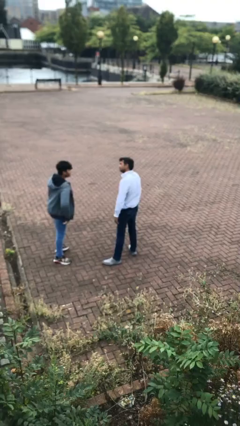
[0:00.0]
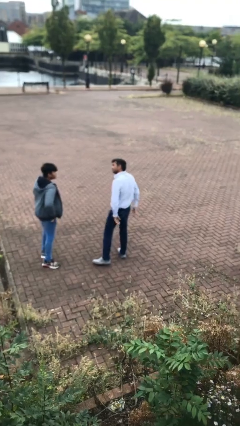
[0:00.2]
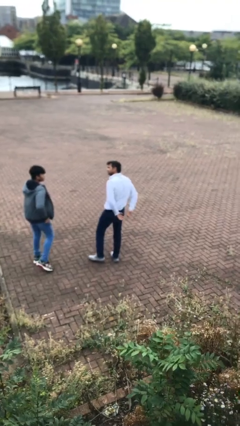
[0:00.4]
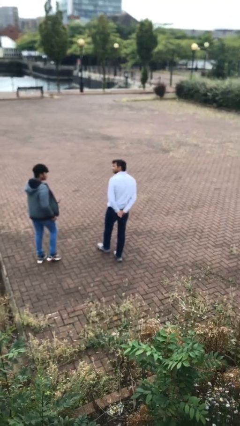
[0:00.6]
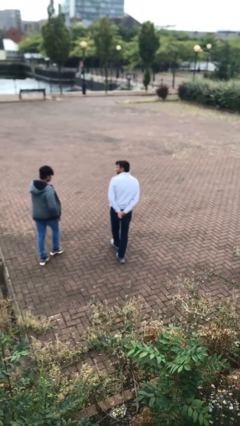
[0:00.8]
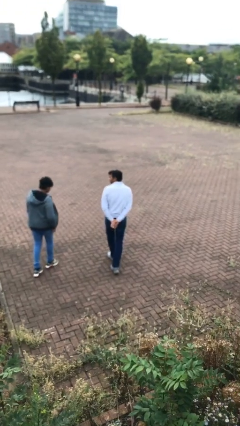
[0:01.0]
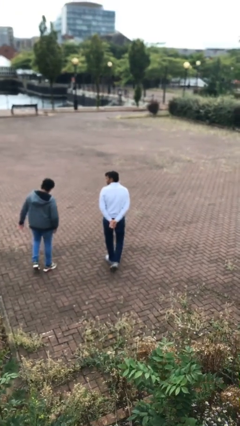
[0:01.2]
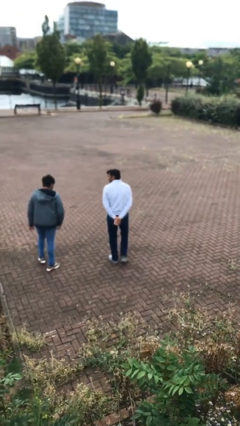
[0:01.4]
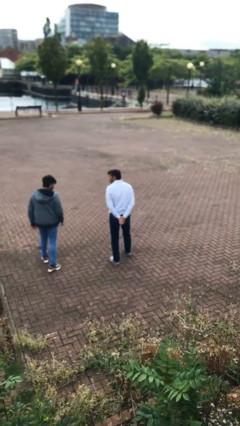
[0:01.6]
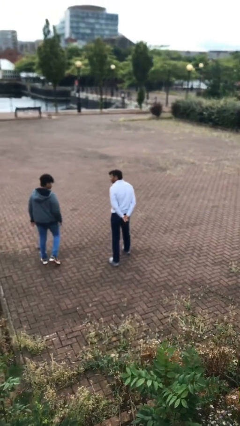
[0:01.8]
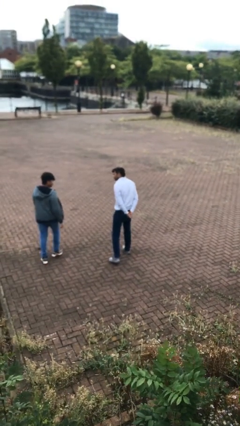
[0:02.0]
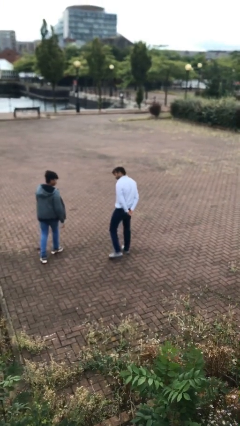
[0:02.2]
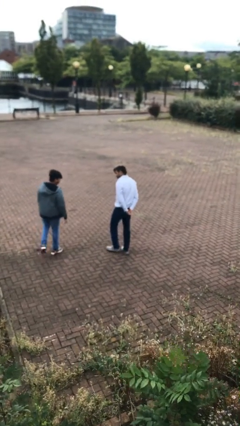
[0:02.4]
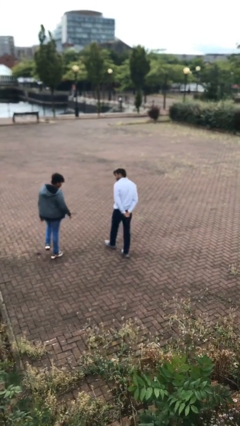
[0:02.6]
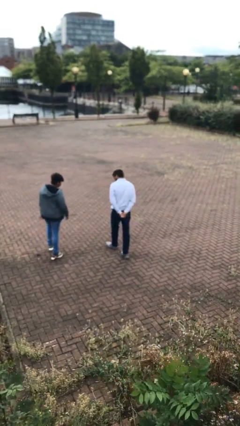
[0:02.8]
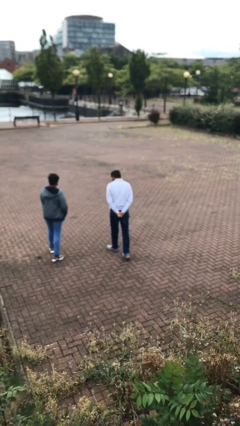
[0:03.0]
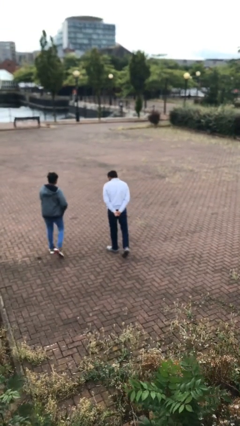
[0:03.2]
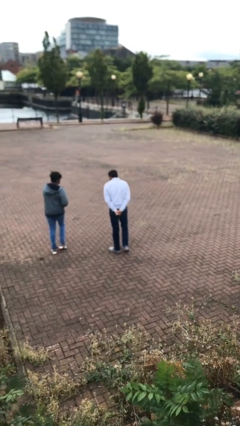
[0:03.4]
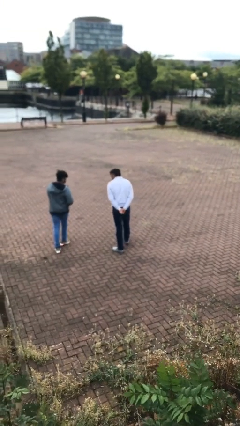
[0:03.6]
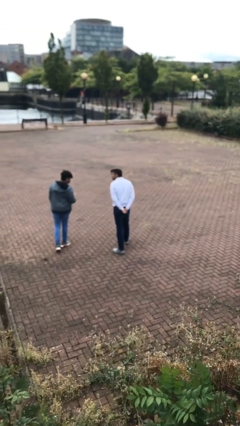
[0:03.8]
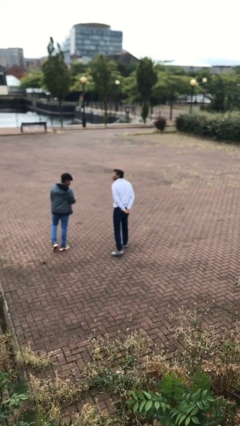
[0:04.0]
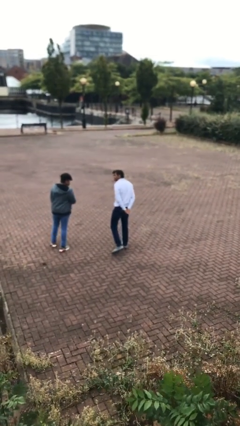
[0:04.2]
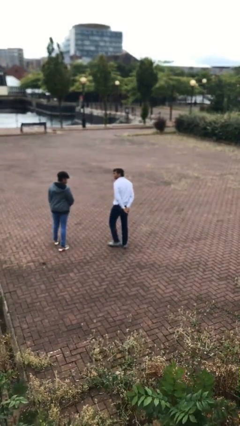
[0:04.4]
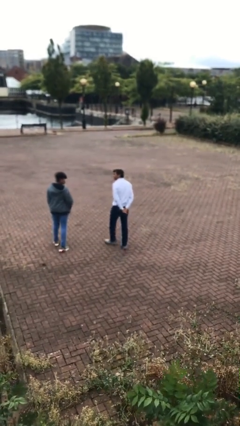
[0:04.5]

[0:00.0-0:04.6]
person talks to person

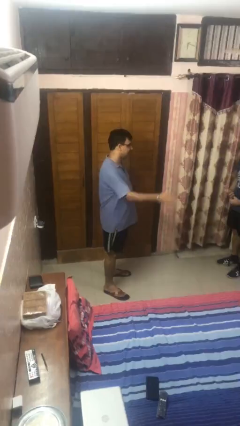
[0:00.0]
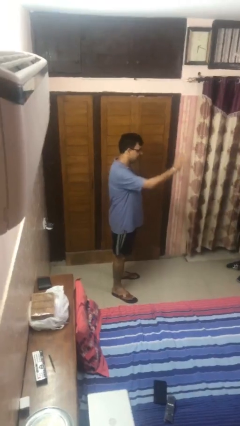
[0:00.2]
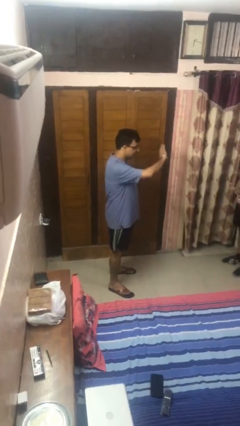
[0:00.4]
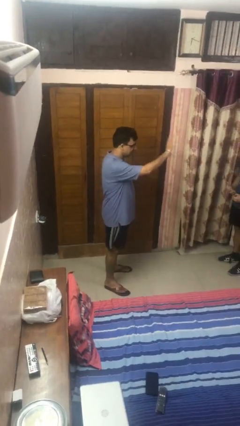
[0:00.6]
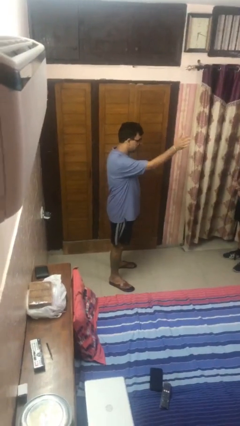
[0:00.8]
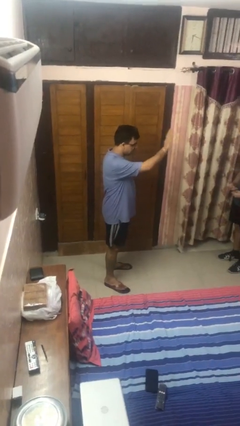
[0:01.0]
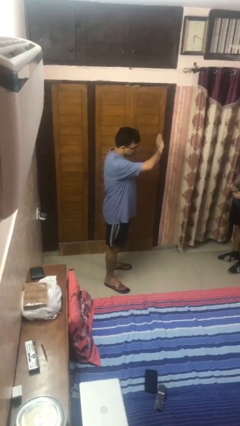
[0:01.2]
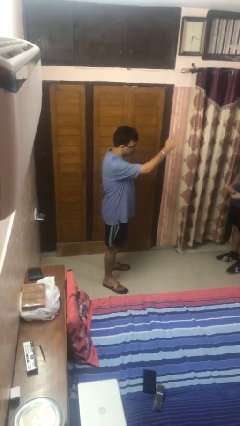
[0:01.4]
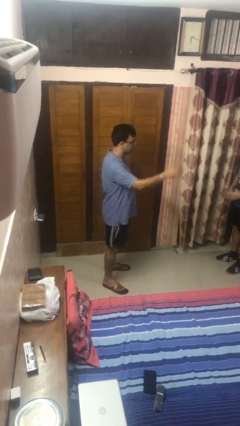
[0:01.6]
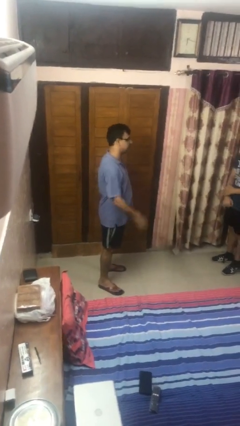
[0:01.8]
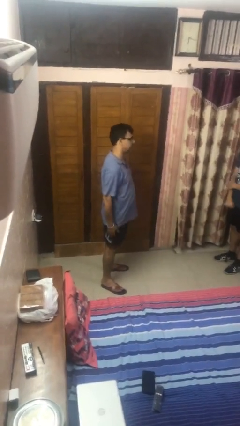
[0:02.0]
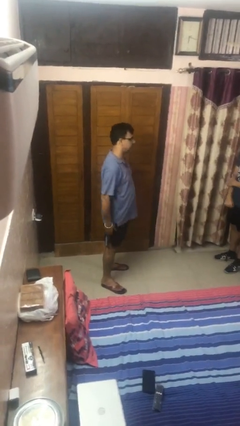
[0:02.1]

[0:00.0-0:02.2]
person waves at person

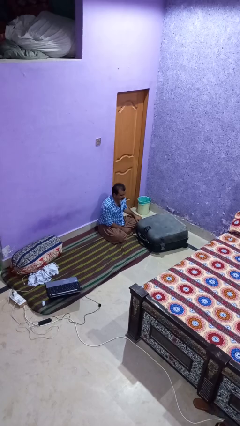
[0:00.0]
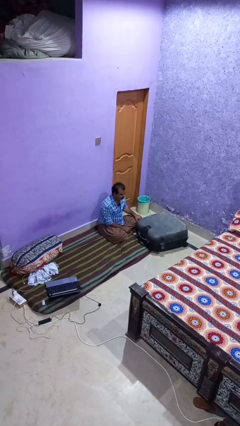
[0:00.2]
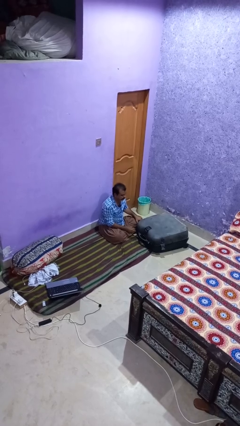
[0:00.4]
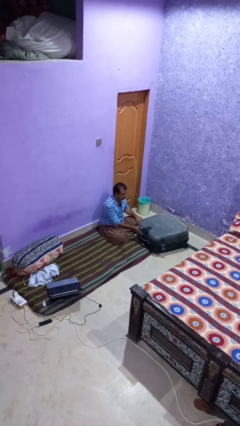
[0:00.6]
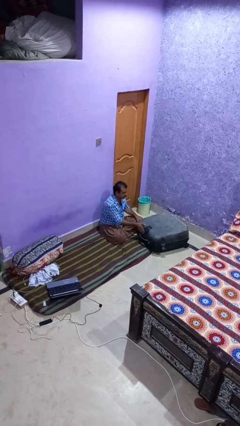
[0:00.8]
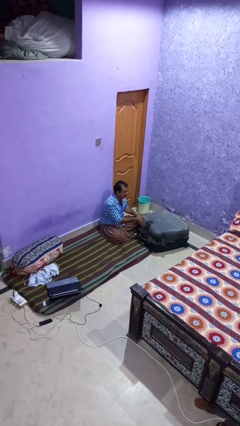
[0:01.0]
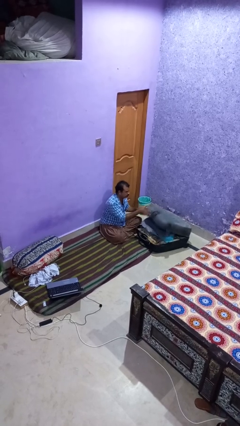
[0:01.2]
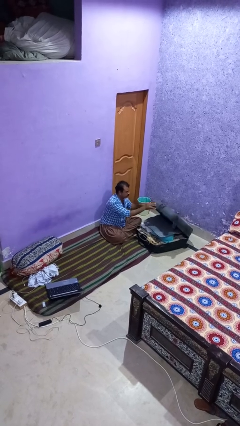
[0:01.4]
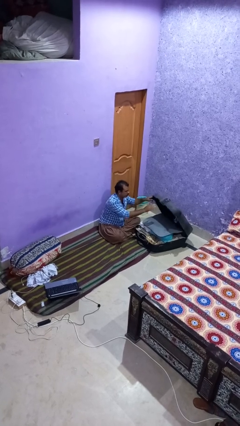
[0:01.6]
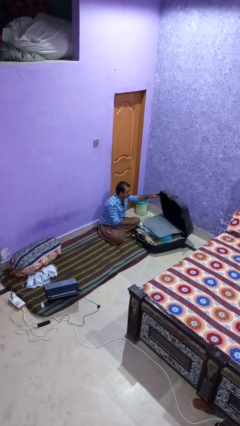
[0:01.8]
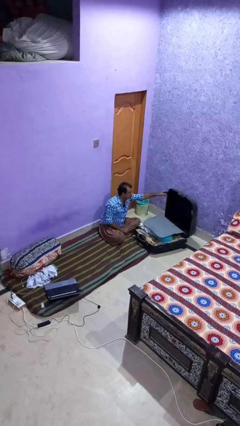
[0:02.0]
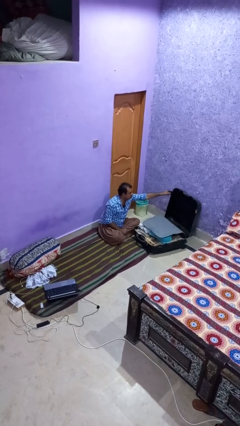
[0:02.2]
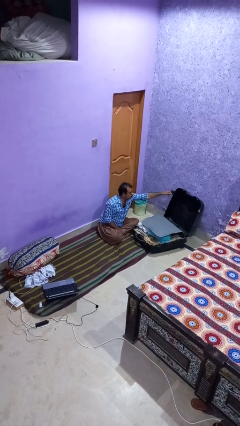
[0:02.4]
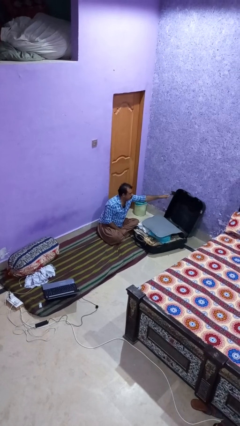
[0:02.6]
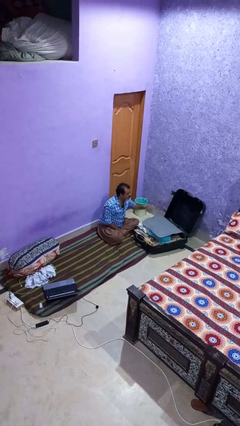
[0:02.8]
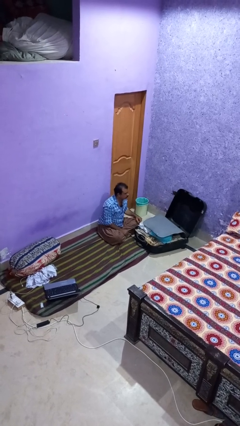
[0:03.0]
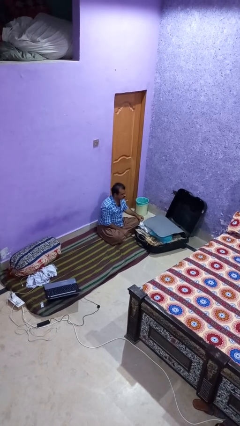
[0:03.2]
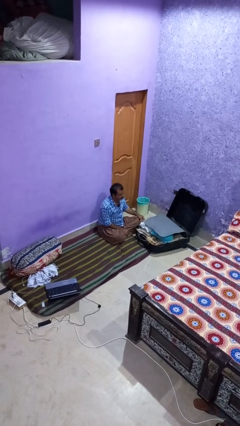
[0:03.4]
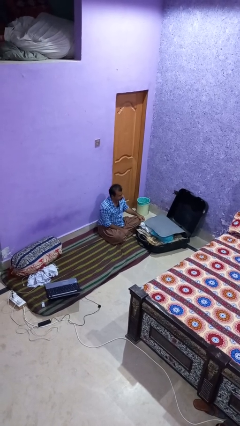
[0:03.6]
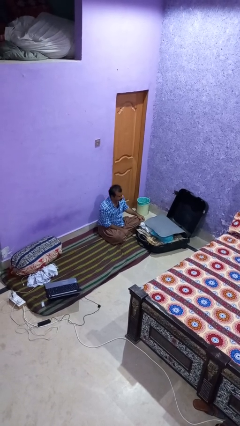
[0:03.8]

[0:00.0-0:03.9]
person opens suitcase

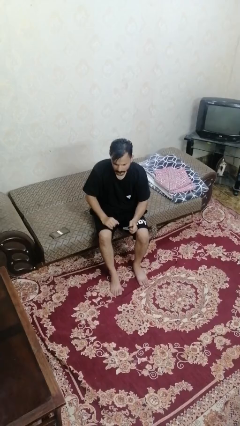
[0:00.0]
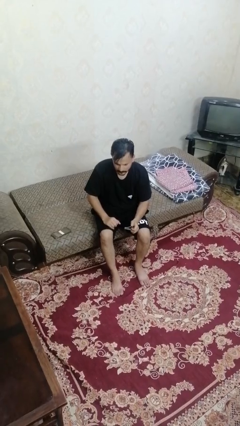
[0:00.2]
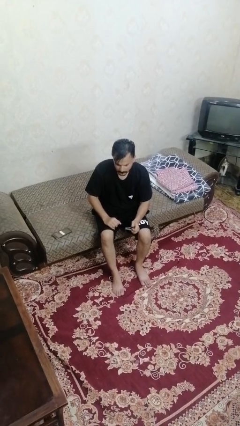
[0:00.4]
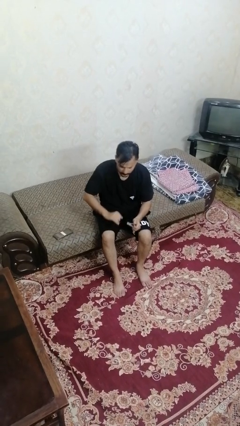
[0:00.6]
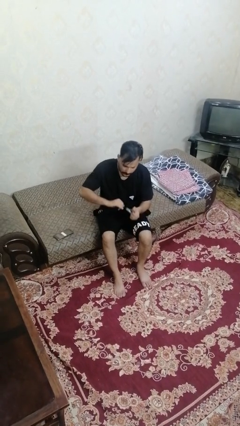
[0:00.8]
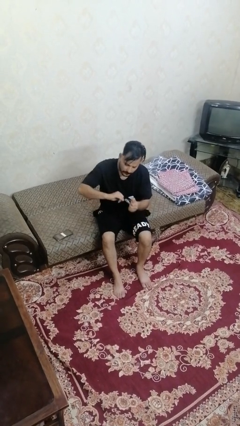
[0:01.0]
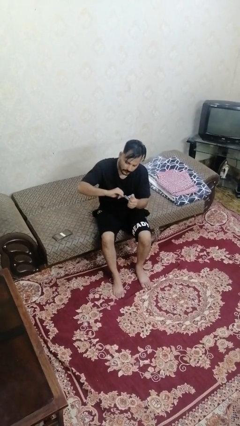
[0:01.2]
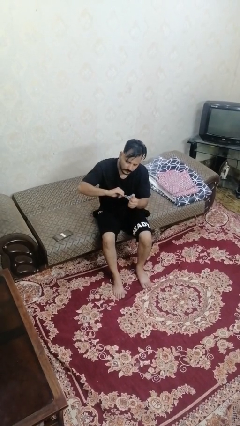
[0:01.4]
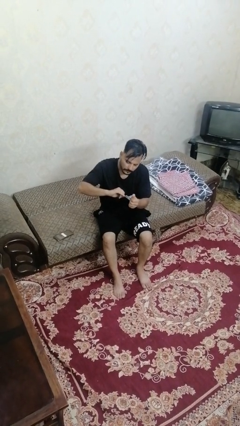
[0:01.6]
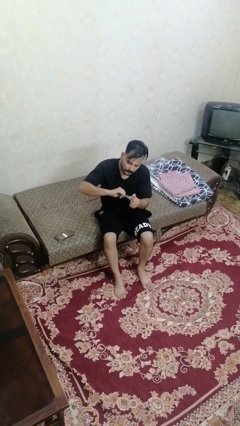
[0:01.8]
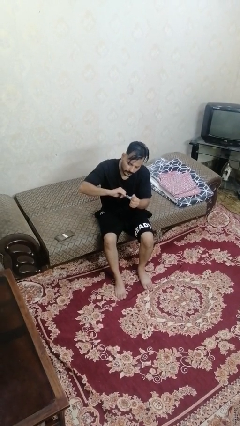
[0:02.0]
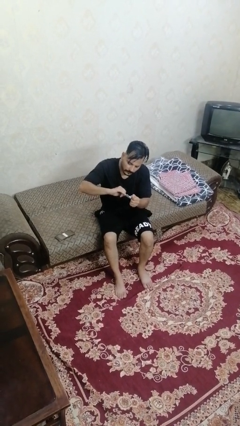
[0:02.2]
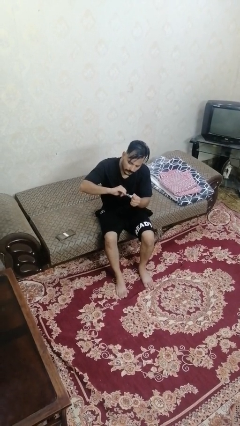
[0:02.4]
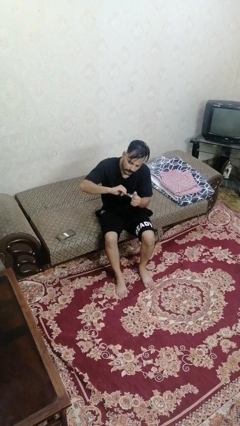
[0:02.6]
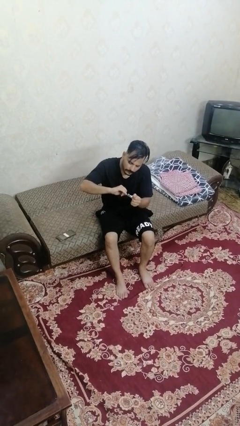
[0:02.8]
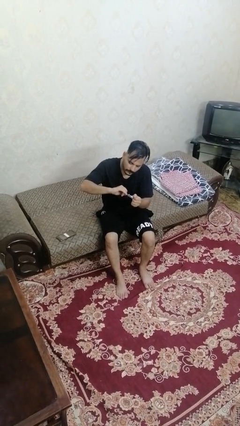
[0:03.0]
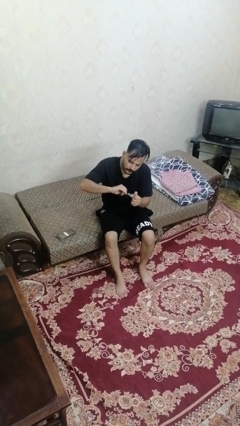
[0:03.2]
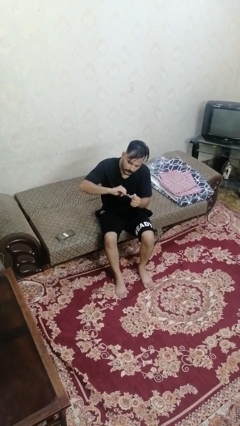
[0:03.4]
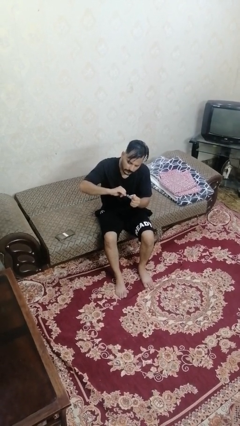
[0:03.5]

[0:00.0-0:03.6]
person clips fingernails

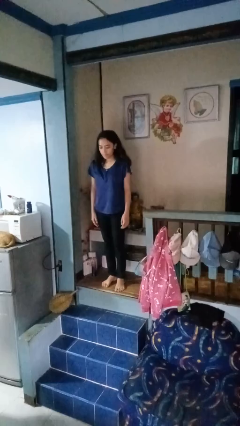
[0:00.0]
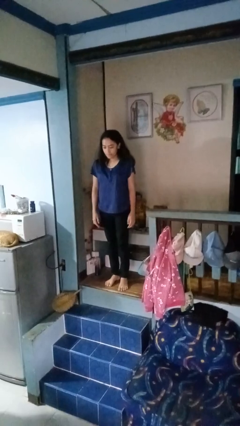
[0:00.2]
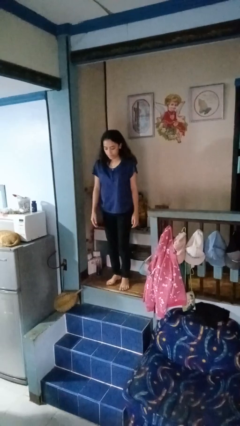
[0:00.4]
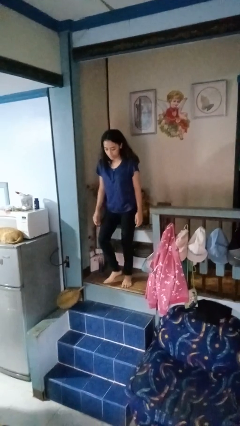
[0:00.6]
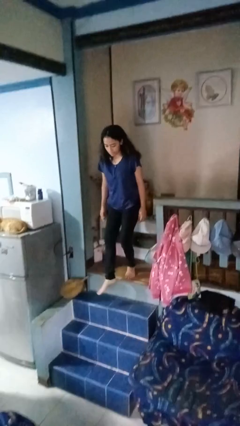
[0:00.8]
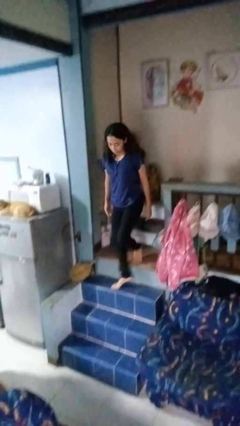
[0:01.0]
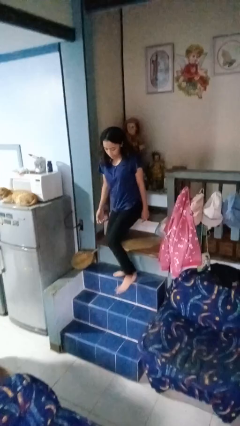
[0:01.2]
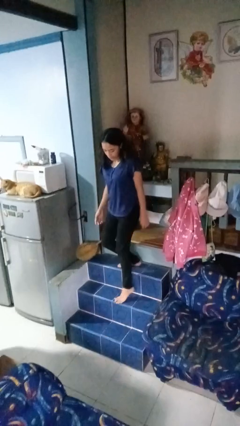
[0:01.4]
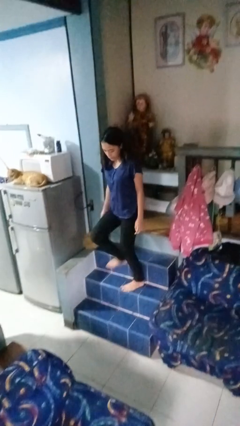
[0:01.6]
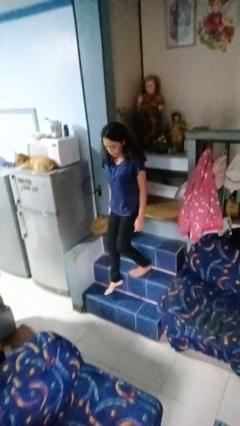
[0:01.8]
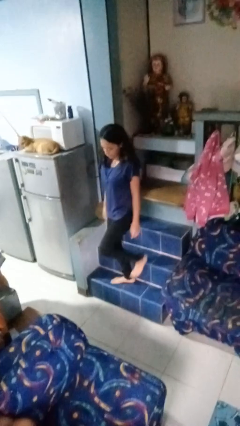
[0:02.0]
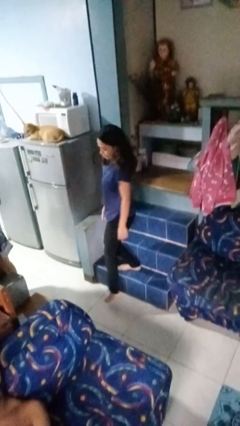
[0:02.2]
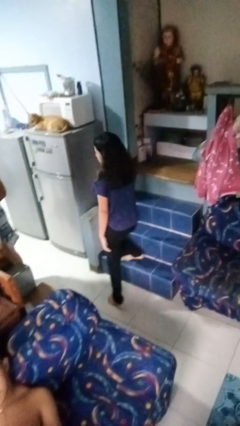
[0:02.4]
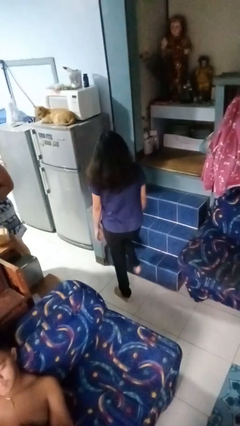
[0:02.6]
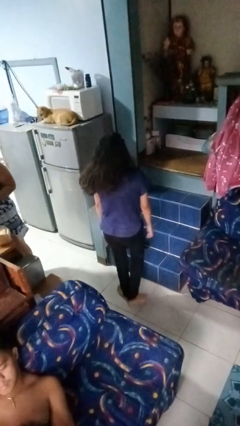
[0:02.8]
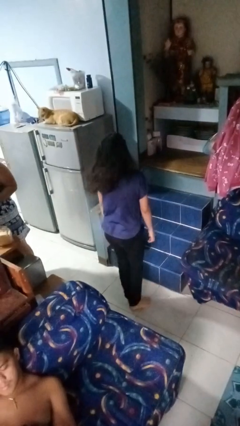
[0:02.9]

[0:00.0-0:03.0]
person climbs down stairs

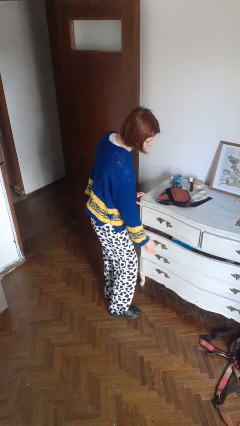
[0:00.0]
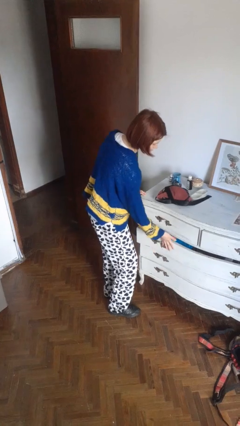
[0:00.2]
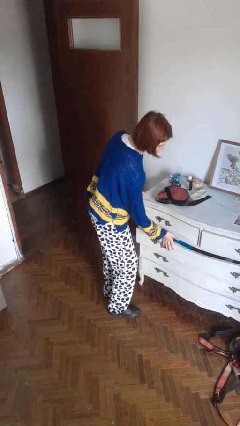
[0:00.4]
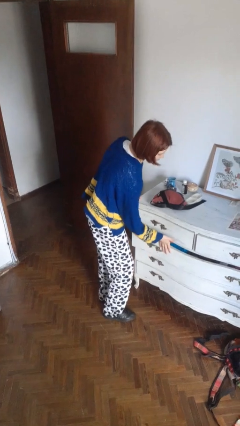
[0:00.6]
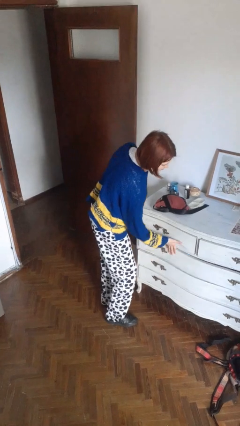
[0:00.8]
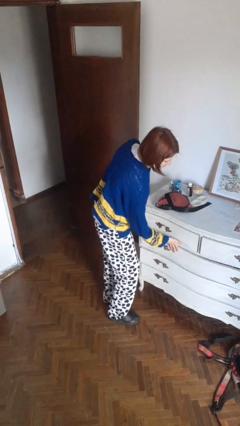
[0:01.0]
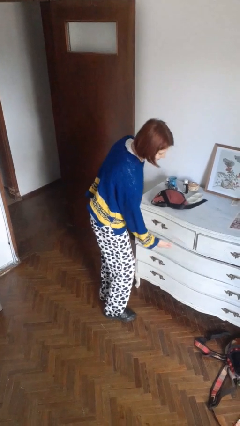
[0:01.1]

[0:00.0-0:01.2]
person closes dresser drawer
